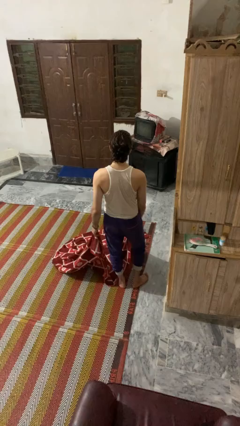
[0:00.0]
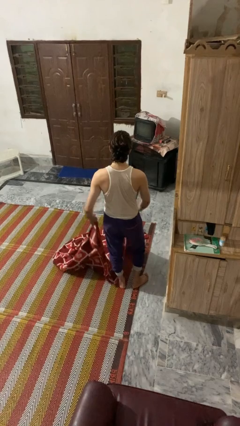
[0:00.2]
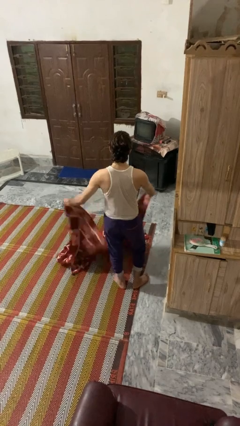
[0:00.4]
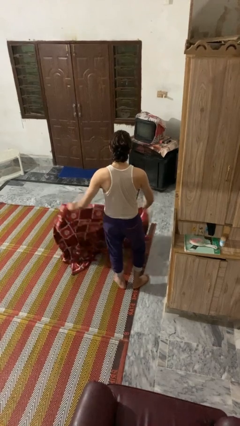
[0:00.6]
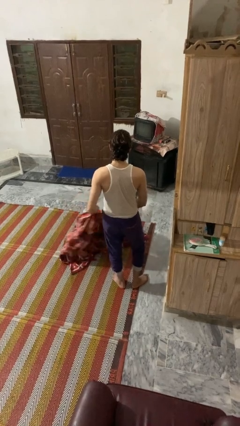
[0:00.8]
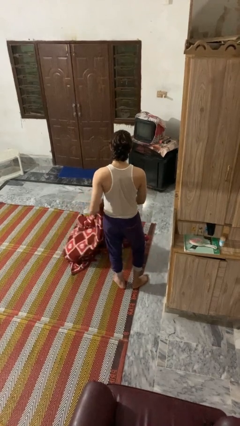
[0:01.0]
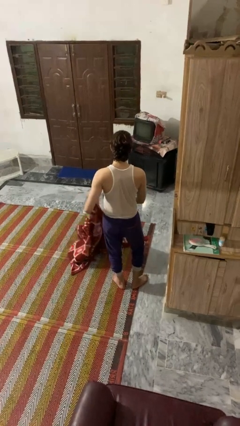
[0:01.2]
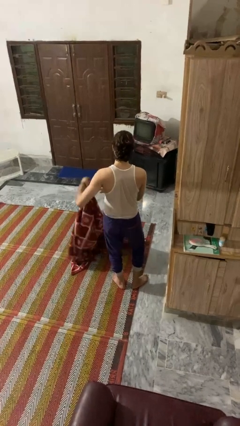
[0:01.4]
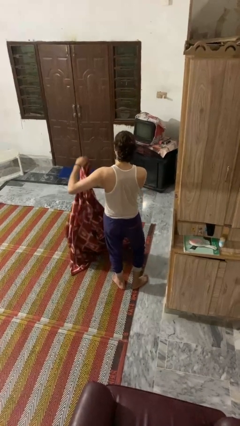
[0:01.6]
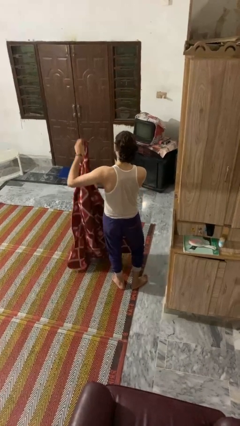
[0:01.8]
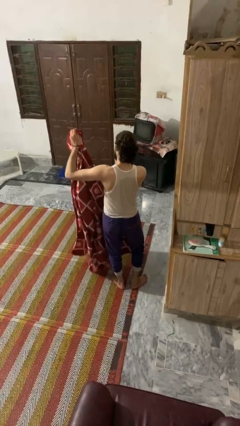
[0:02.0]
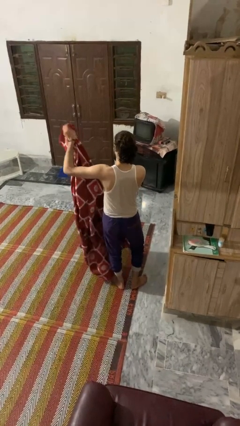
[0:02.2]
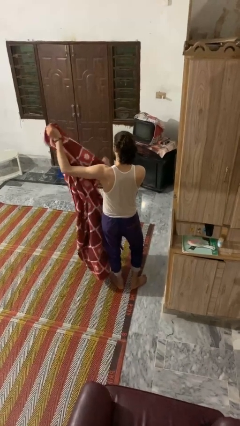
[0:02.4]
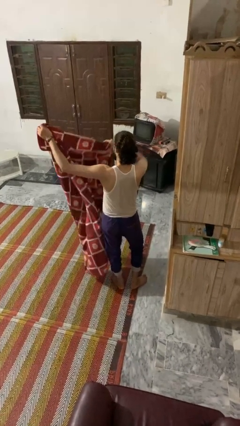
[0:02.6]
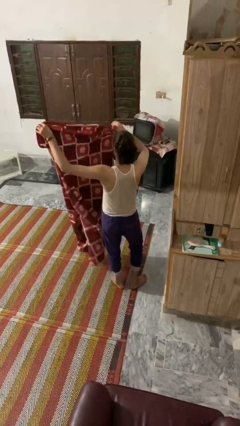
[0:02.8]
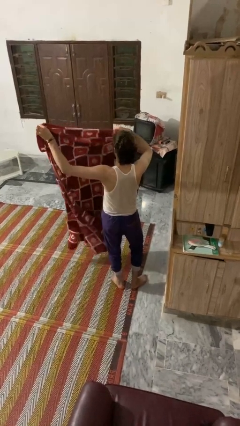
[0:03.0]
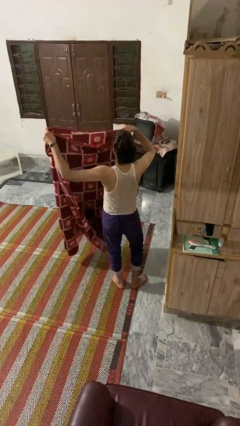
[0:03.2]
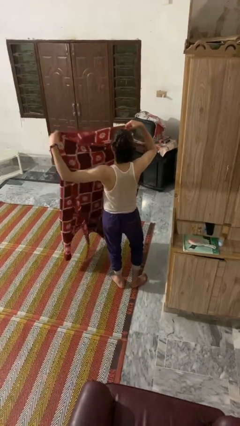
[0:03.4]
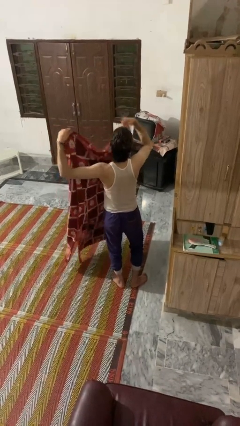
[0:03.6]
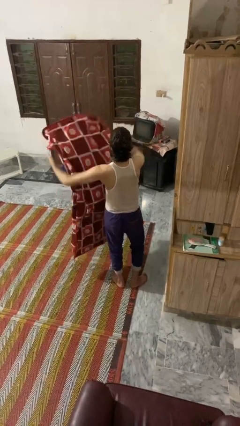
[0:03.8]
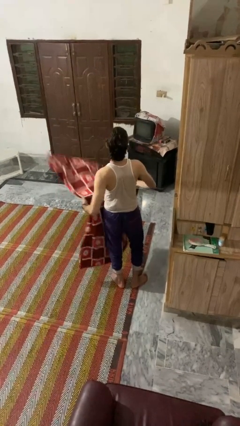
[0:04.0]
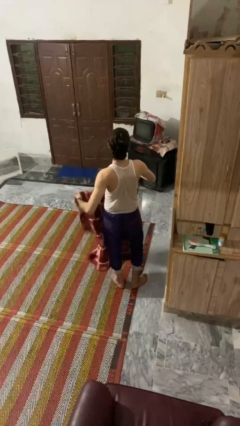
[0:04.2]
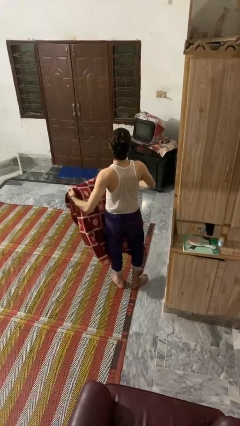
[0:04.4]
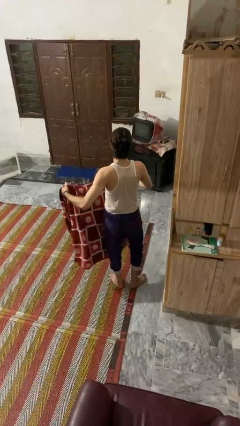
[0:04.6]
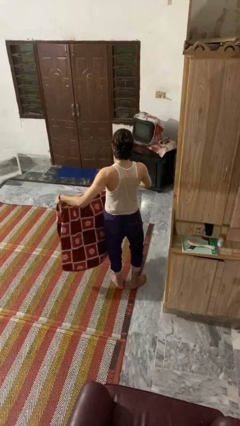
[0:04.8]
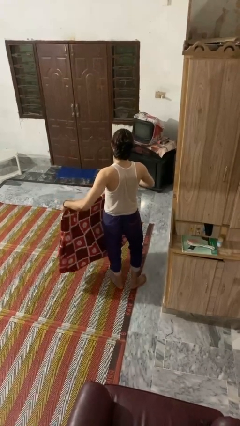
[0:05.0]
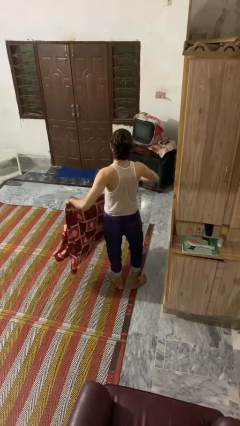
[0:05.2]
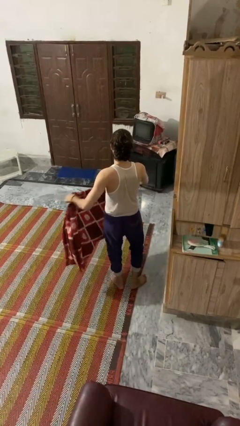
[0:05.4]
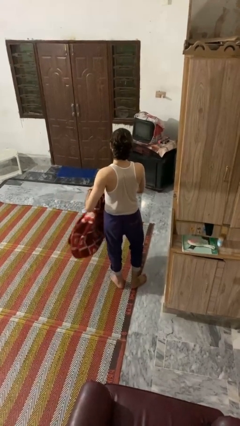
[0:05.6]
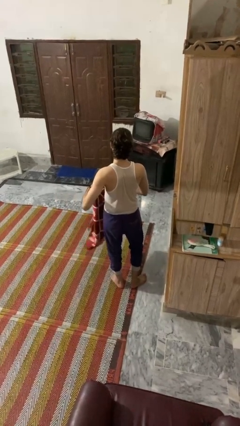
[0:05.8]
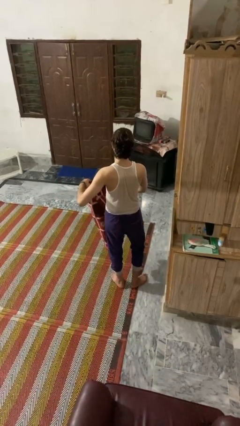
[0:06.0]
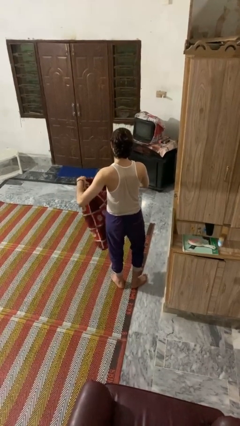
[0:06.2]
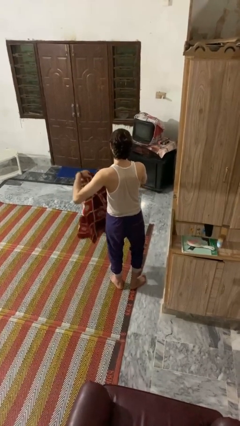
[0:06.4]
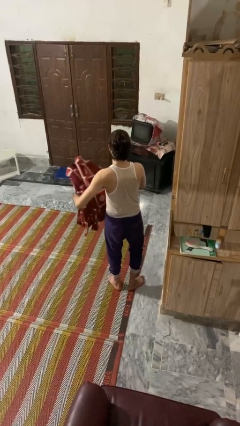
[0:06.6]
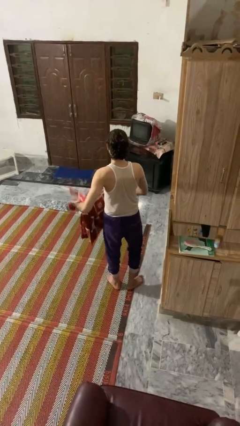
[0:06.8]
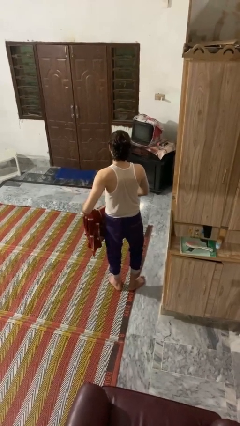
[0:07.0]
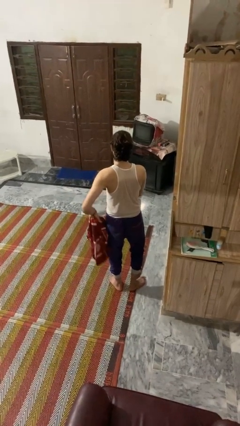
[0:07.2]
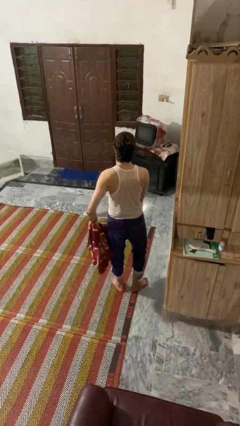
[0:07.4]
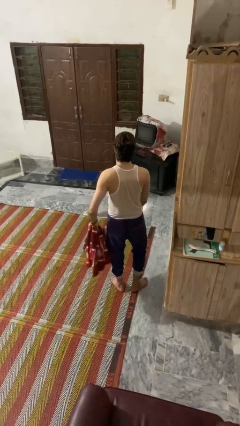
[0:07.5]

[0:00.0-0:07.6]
person folds blanket

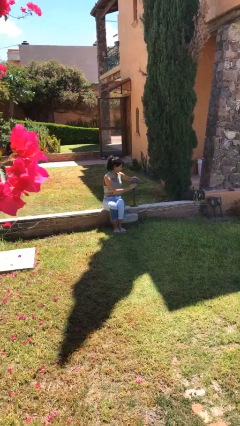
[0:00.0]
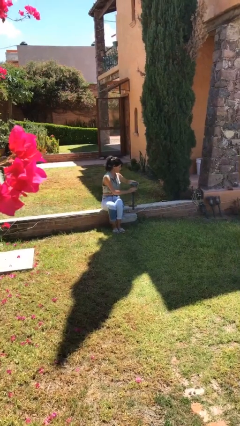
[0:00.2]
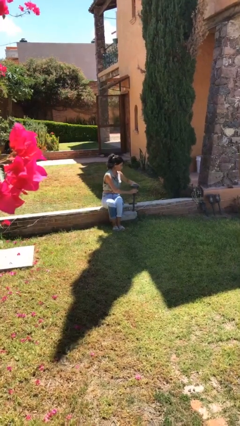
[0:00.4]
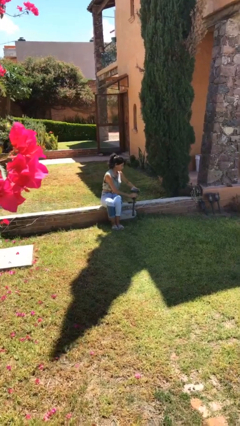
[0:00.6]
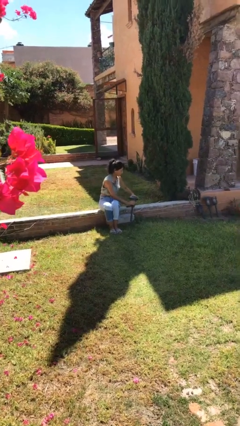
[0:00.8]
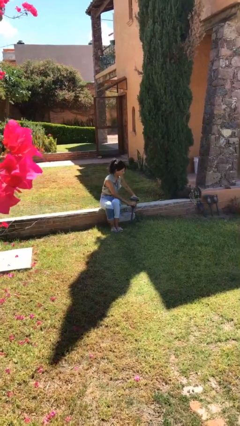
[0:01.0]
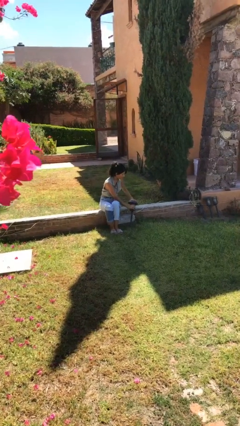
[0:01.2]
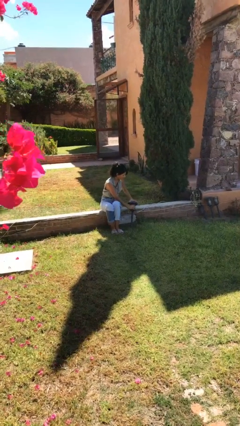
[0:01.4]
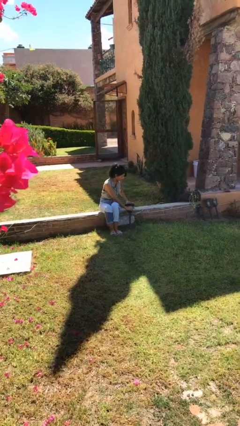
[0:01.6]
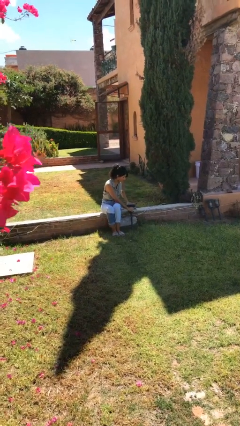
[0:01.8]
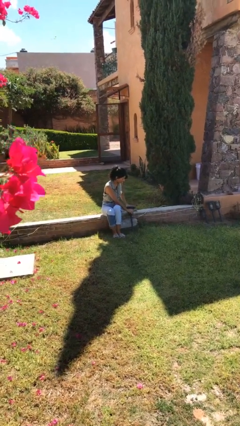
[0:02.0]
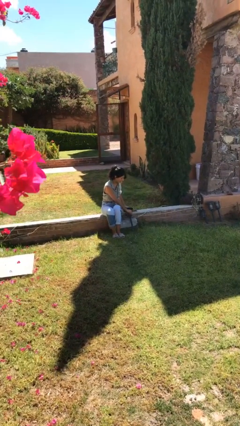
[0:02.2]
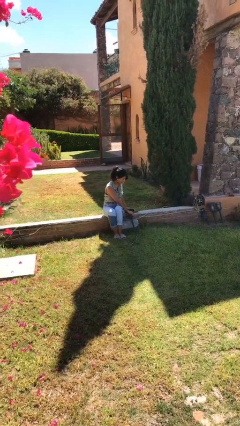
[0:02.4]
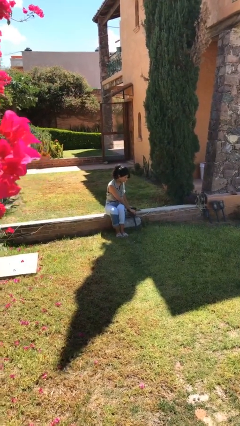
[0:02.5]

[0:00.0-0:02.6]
person puts down object on floor

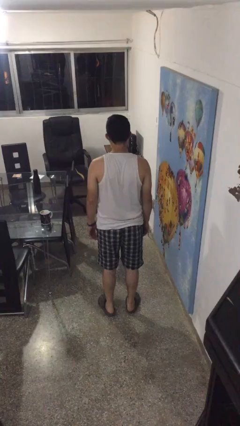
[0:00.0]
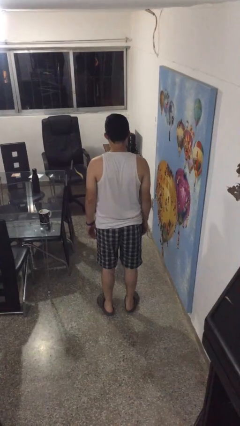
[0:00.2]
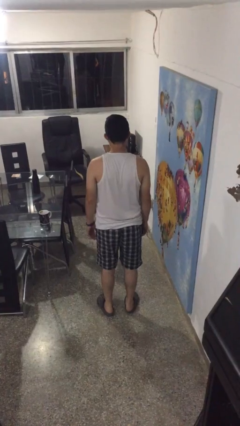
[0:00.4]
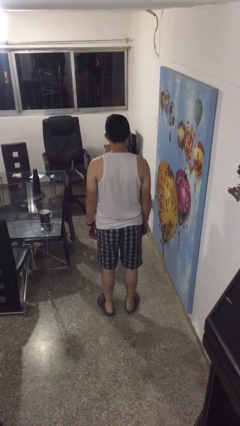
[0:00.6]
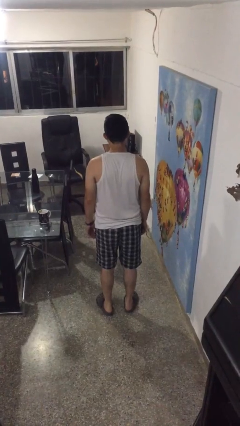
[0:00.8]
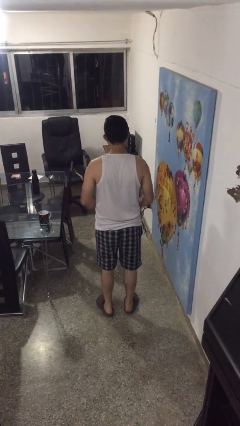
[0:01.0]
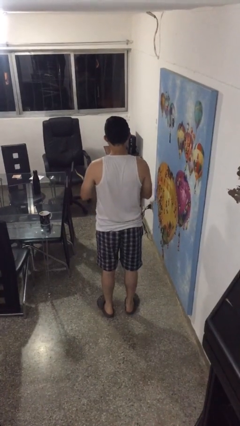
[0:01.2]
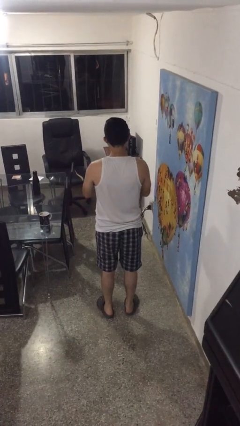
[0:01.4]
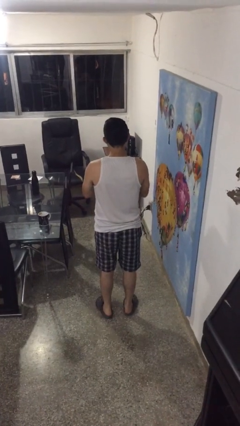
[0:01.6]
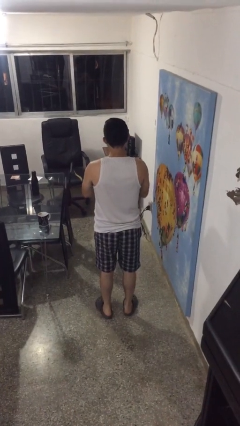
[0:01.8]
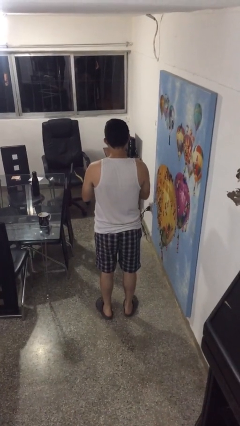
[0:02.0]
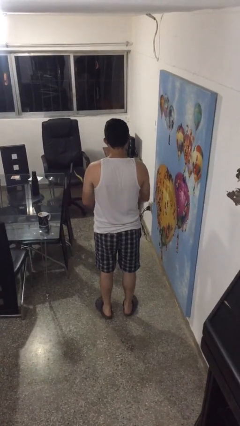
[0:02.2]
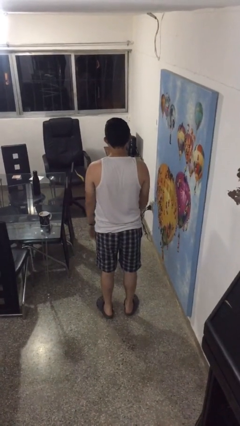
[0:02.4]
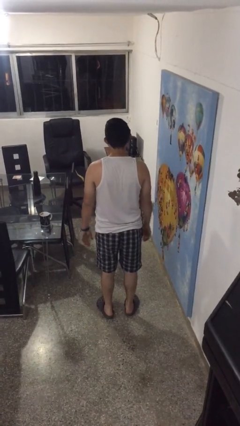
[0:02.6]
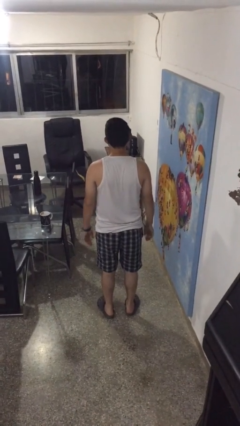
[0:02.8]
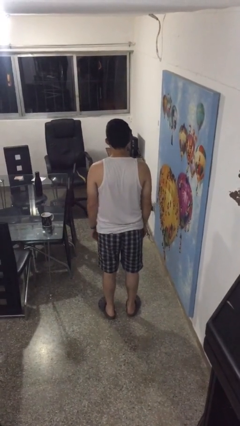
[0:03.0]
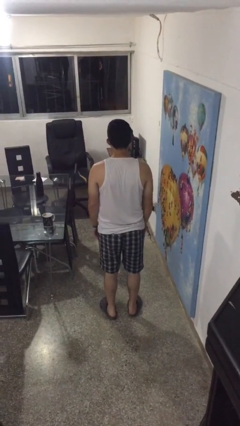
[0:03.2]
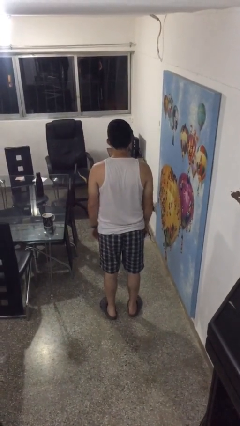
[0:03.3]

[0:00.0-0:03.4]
person cracks knuckles

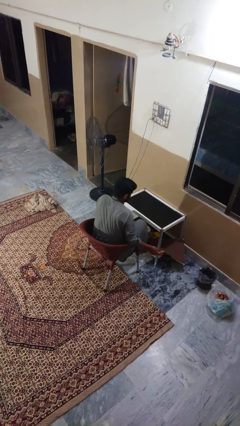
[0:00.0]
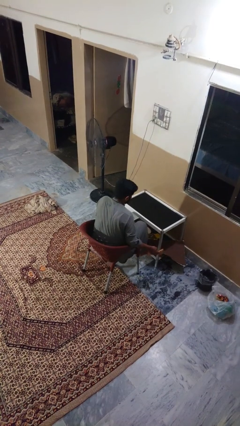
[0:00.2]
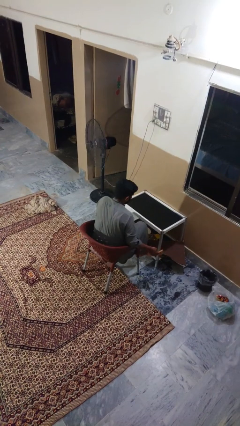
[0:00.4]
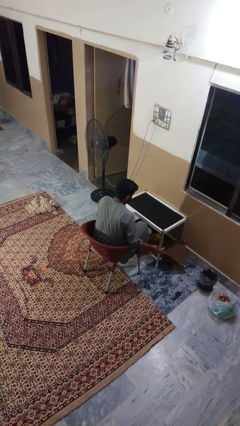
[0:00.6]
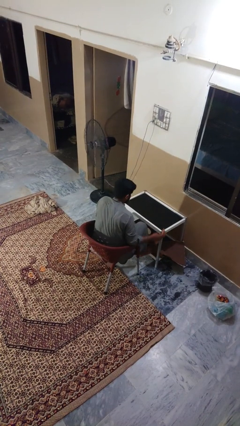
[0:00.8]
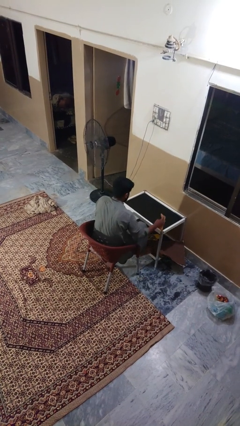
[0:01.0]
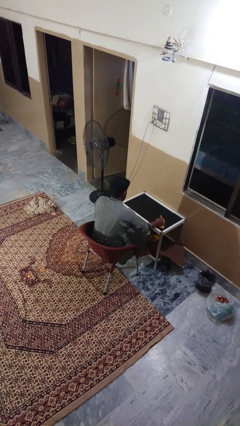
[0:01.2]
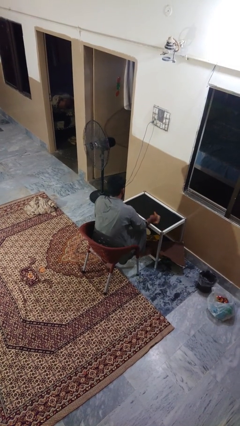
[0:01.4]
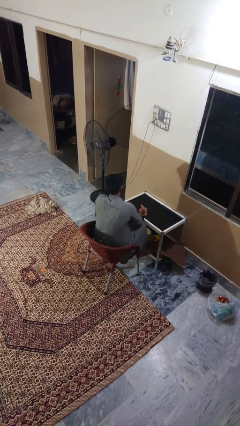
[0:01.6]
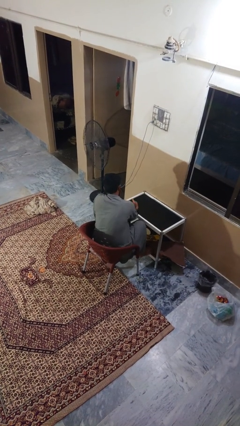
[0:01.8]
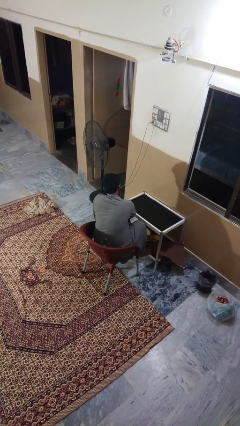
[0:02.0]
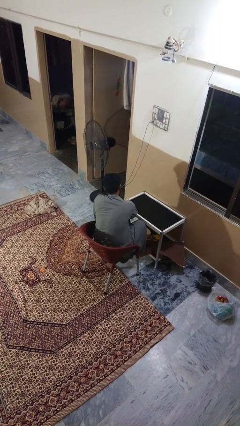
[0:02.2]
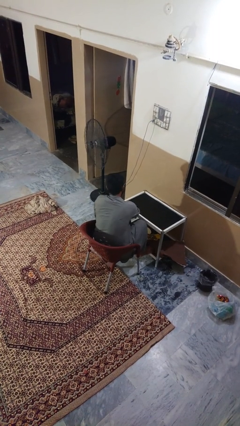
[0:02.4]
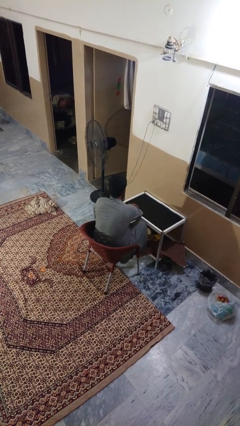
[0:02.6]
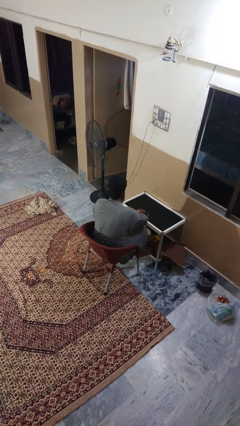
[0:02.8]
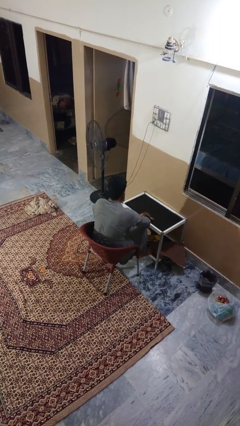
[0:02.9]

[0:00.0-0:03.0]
person cleans table with rag

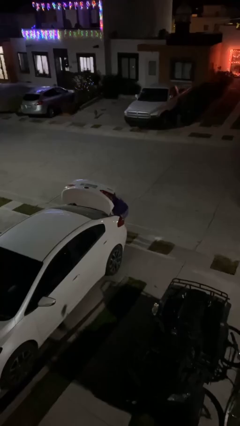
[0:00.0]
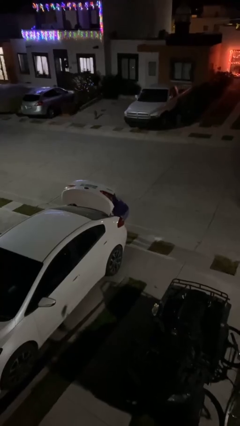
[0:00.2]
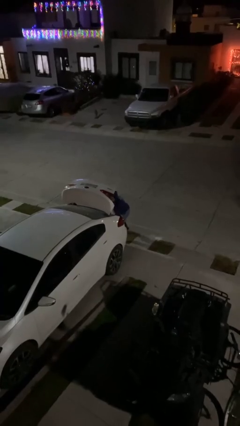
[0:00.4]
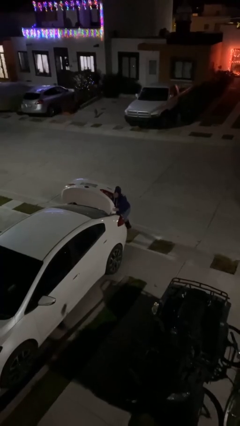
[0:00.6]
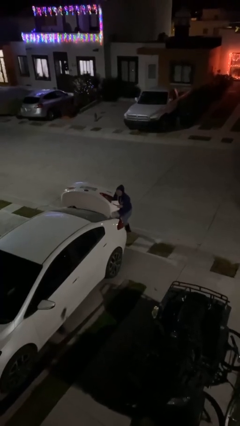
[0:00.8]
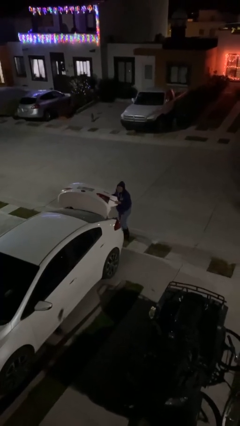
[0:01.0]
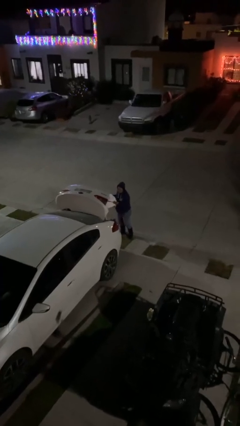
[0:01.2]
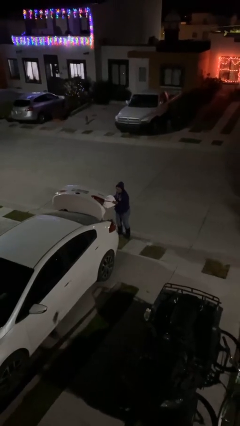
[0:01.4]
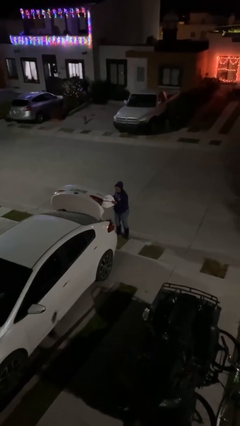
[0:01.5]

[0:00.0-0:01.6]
person unloads car
